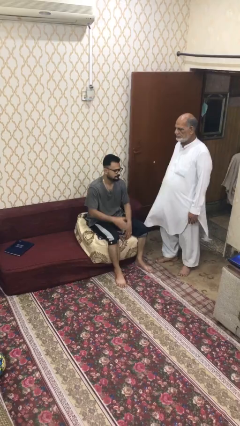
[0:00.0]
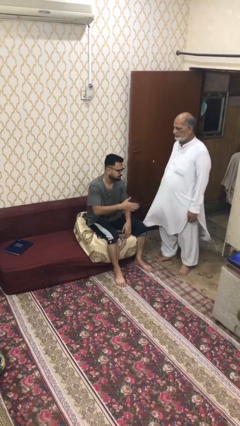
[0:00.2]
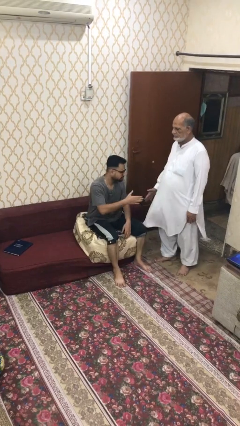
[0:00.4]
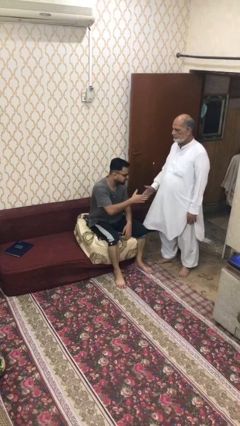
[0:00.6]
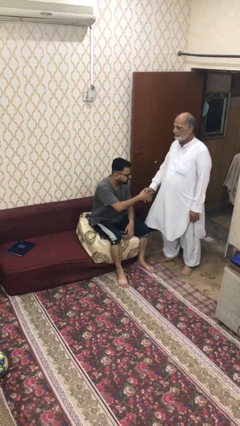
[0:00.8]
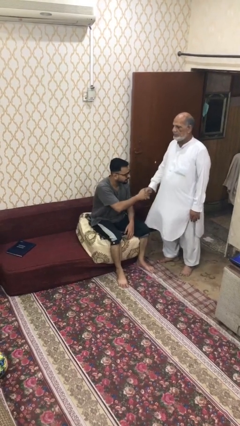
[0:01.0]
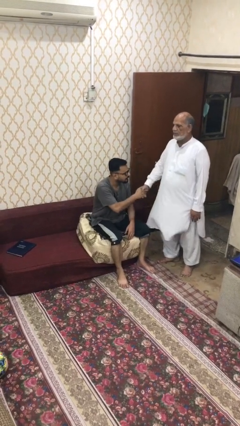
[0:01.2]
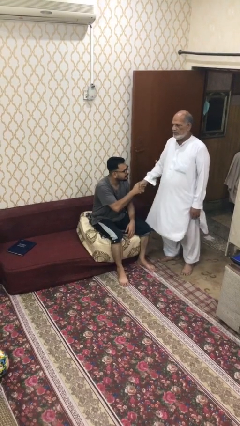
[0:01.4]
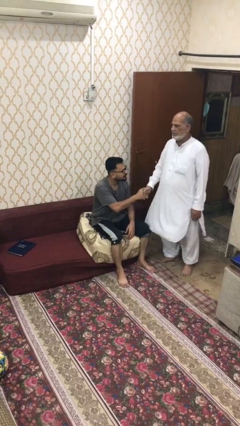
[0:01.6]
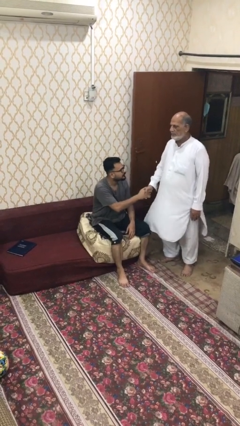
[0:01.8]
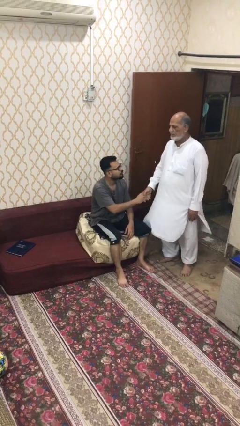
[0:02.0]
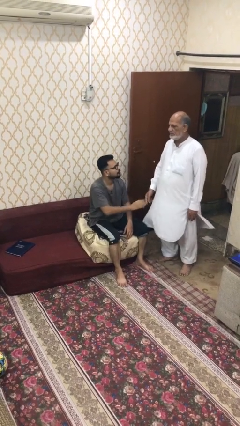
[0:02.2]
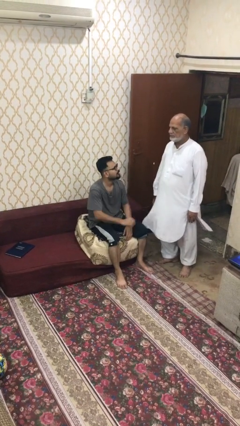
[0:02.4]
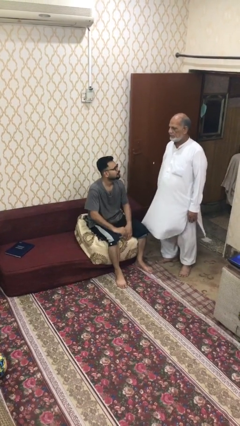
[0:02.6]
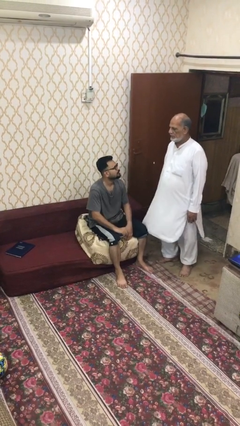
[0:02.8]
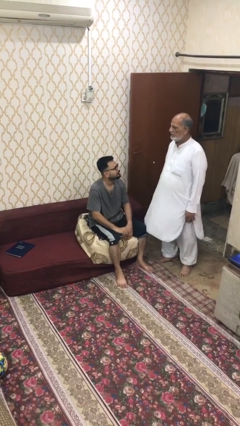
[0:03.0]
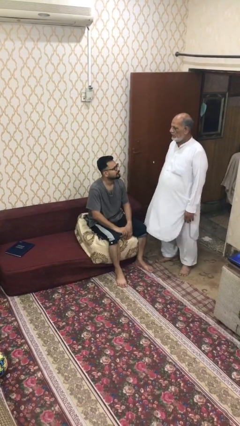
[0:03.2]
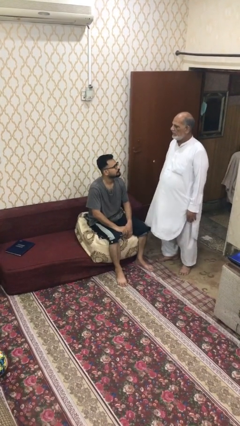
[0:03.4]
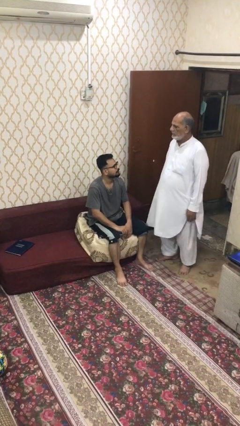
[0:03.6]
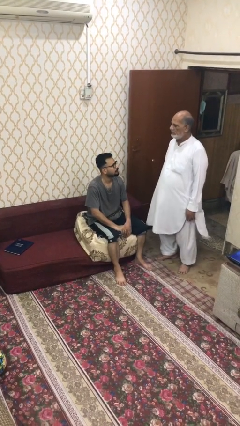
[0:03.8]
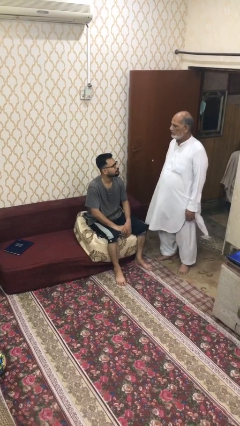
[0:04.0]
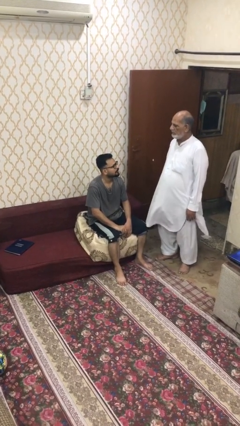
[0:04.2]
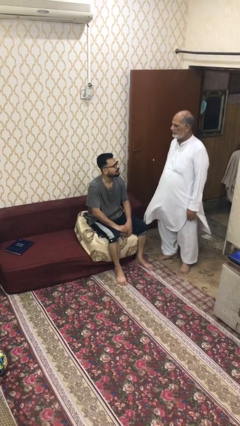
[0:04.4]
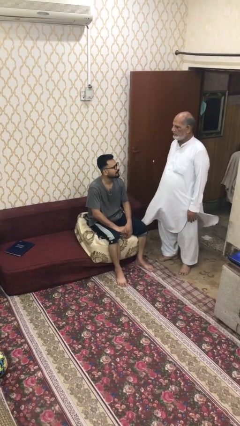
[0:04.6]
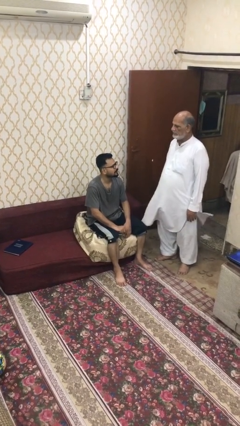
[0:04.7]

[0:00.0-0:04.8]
person shakes hand

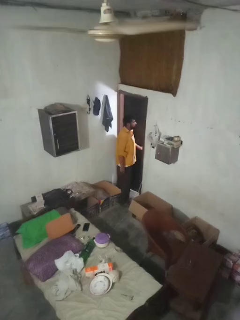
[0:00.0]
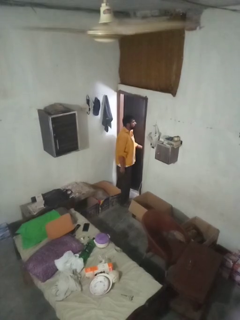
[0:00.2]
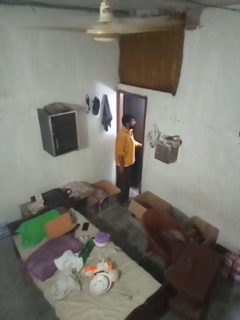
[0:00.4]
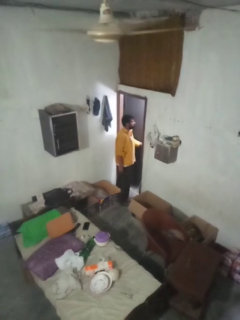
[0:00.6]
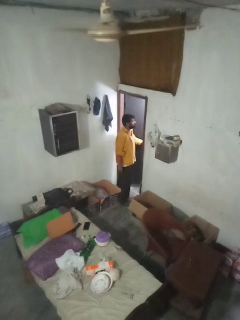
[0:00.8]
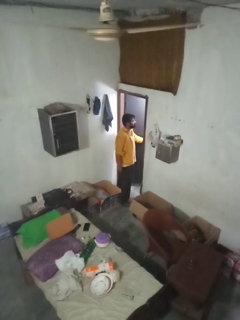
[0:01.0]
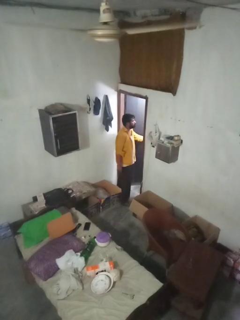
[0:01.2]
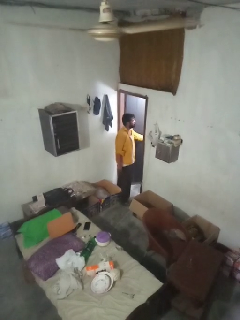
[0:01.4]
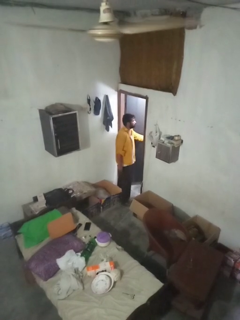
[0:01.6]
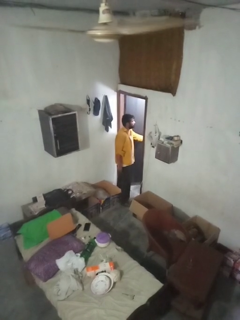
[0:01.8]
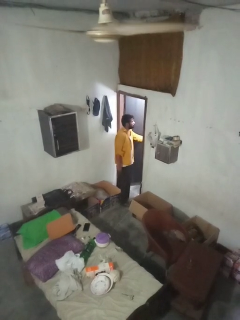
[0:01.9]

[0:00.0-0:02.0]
person opens facility door

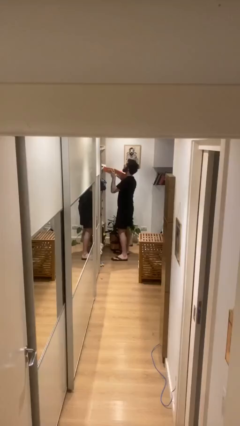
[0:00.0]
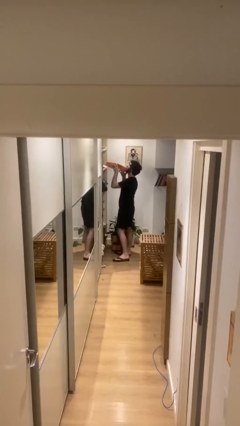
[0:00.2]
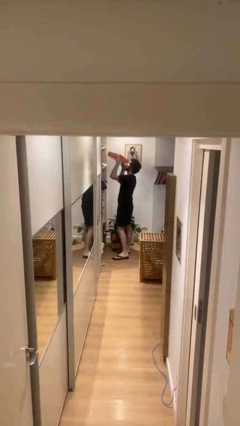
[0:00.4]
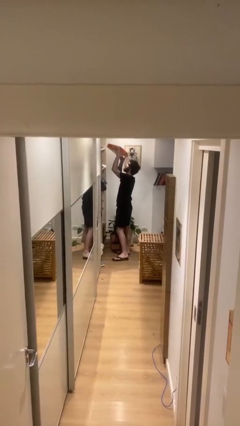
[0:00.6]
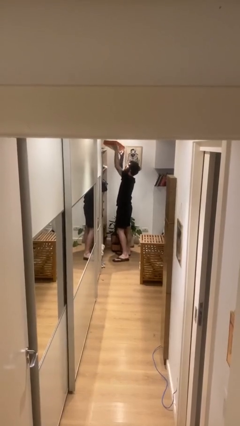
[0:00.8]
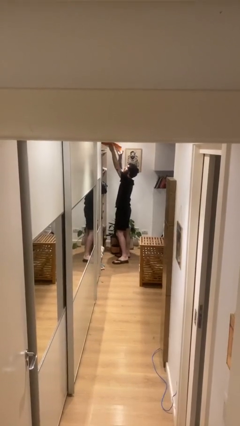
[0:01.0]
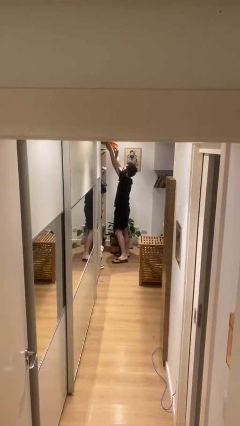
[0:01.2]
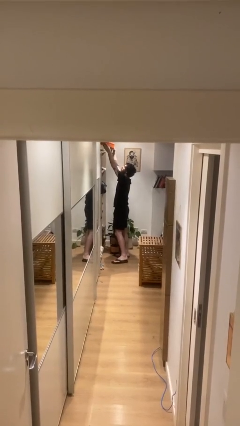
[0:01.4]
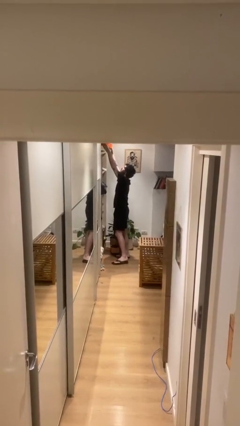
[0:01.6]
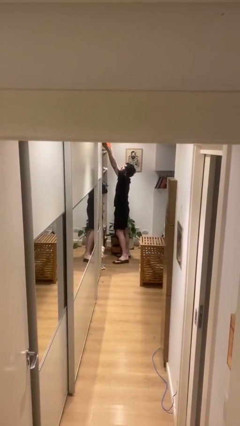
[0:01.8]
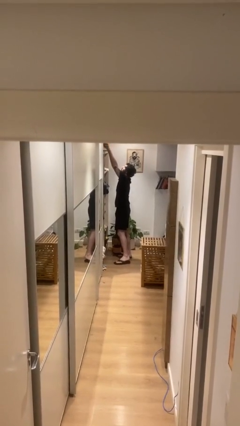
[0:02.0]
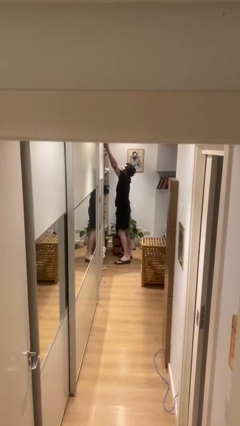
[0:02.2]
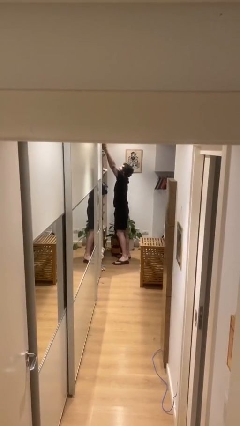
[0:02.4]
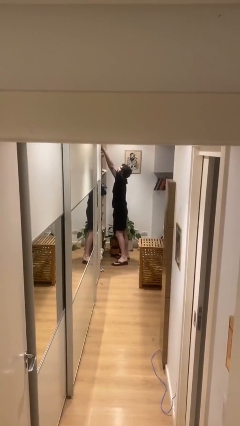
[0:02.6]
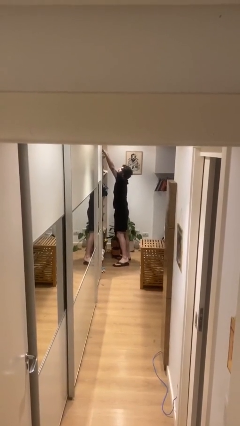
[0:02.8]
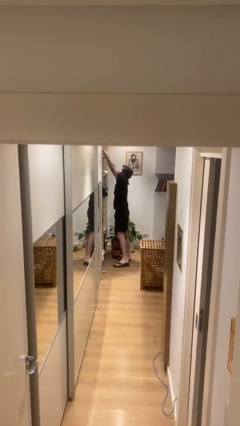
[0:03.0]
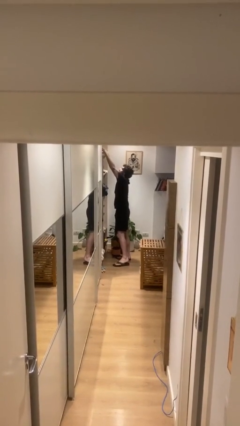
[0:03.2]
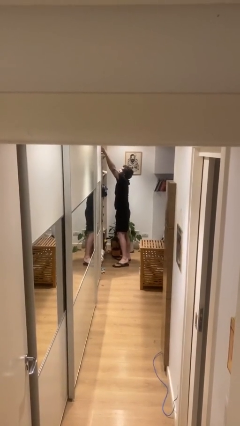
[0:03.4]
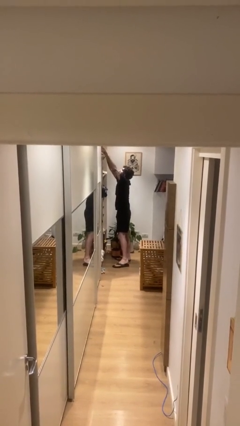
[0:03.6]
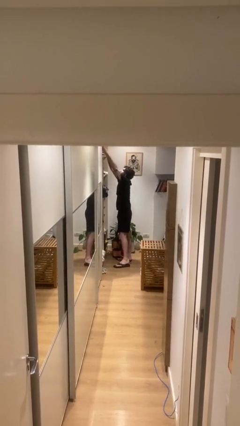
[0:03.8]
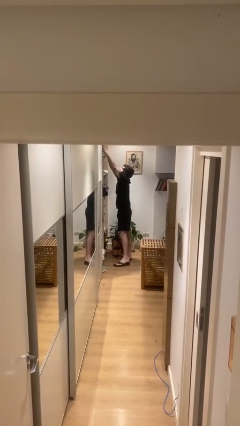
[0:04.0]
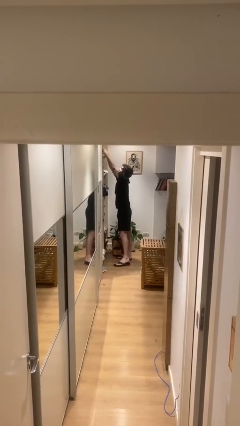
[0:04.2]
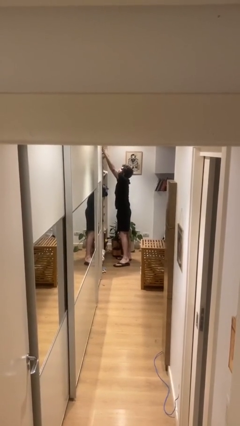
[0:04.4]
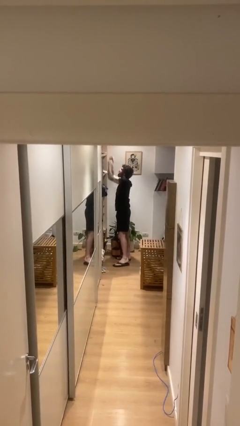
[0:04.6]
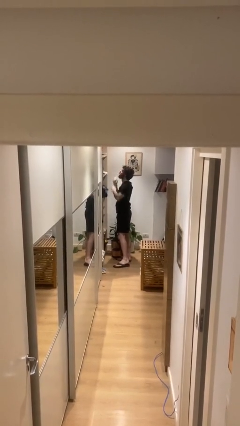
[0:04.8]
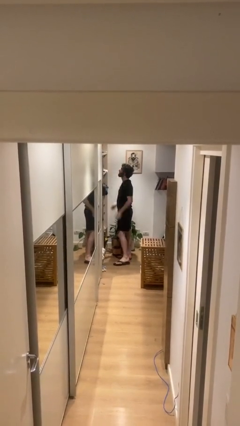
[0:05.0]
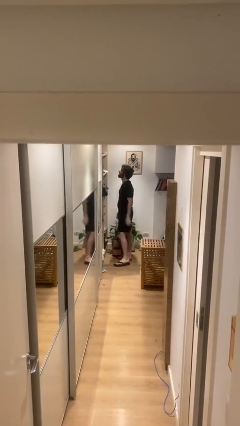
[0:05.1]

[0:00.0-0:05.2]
person puts down object on shelf

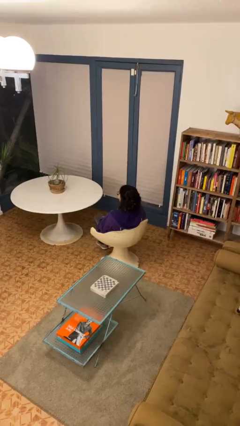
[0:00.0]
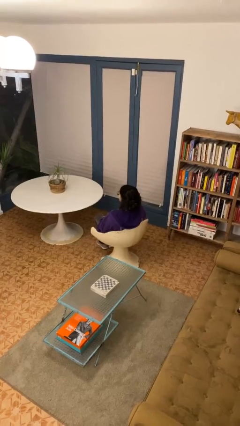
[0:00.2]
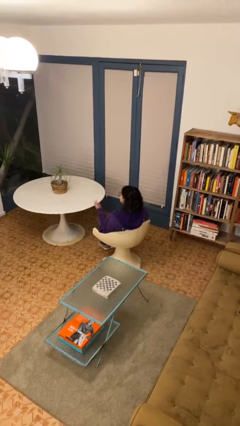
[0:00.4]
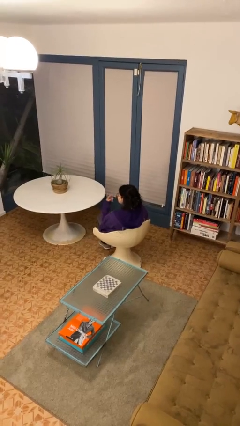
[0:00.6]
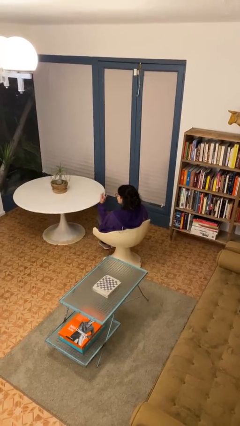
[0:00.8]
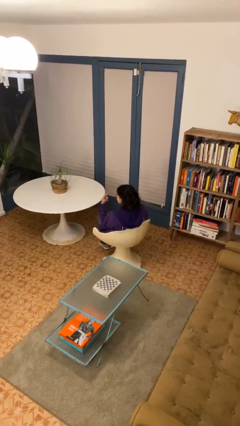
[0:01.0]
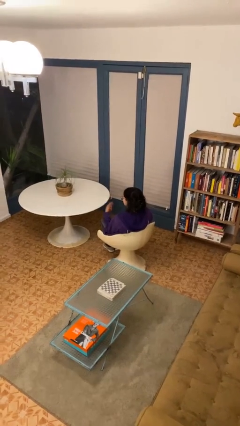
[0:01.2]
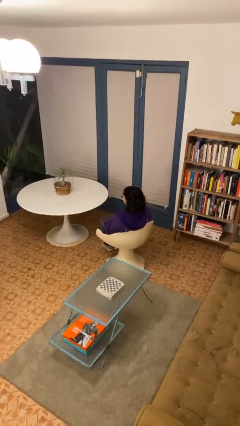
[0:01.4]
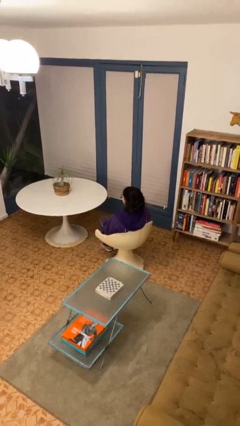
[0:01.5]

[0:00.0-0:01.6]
person gestures watch closely

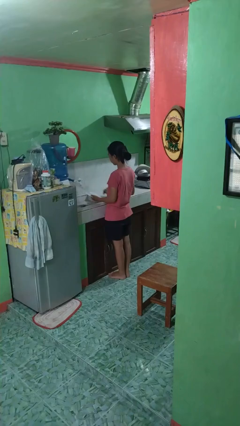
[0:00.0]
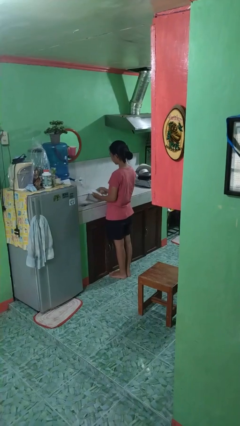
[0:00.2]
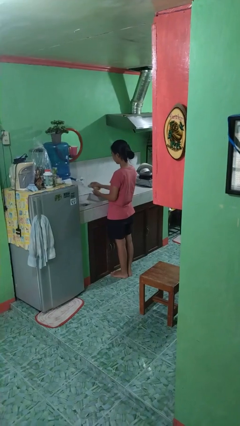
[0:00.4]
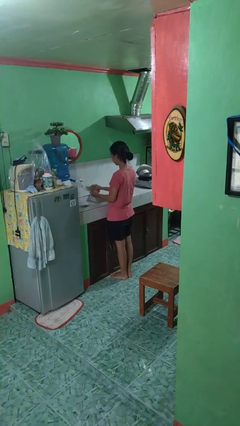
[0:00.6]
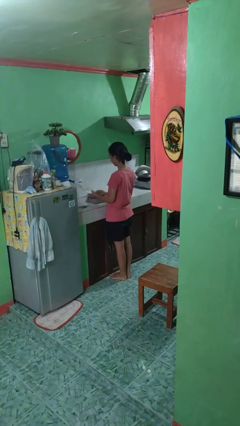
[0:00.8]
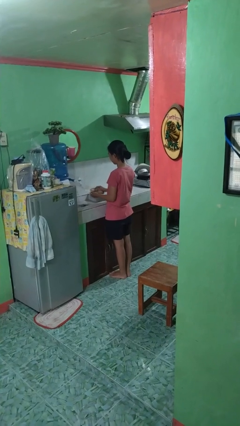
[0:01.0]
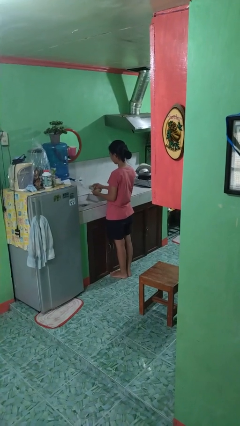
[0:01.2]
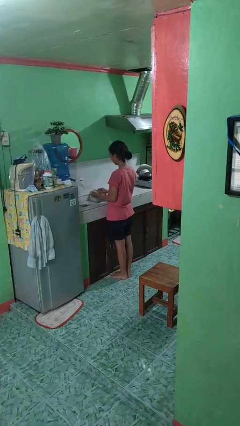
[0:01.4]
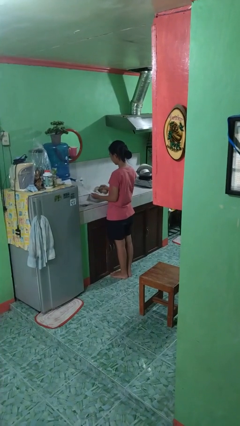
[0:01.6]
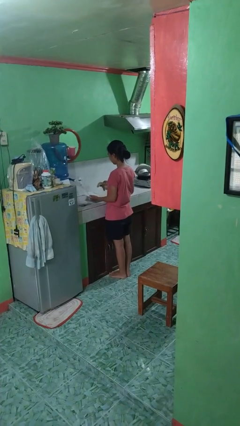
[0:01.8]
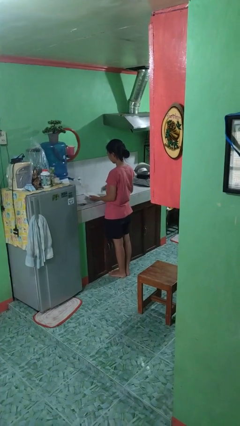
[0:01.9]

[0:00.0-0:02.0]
person dries dish

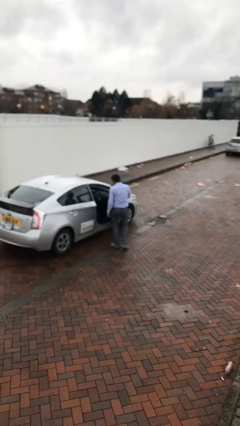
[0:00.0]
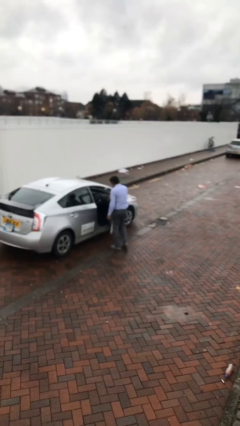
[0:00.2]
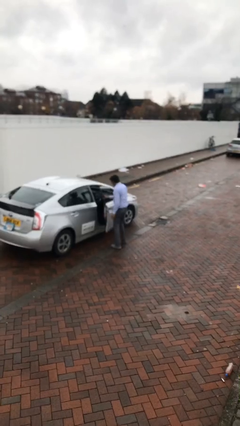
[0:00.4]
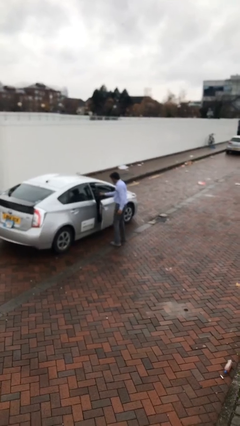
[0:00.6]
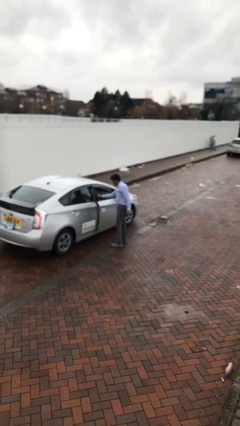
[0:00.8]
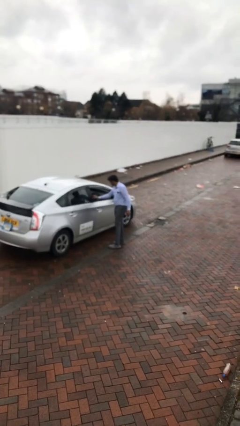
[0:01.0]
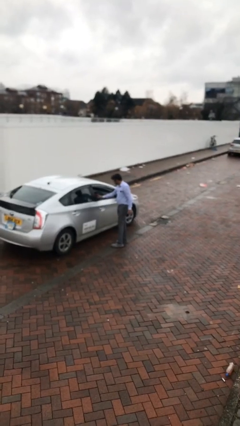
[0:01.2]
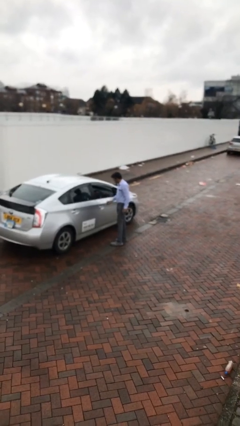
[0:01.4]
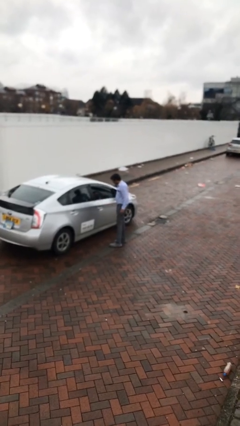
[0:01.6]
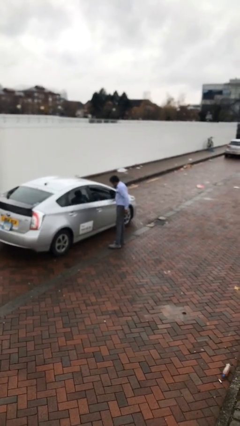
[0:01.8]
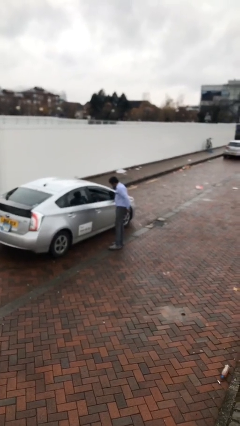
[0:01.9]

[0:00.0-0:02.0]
person closes car door

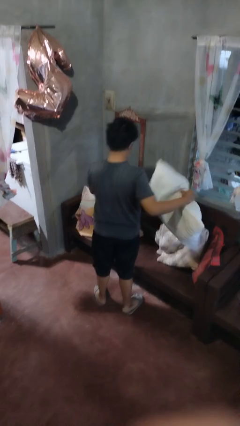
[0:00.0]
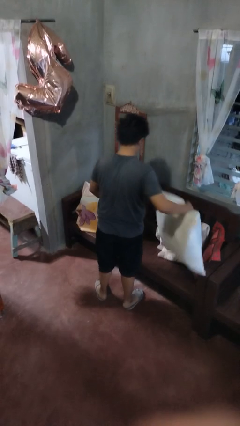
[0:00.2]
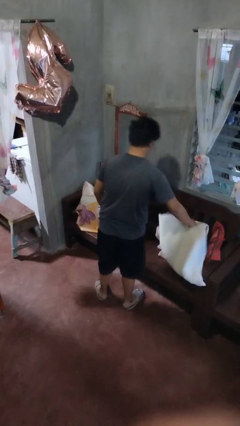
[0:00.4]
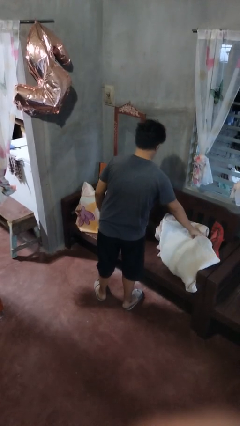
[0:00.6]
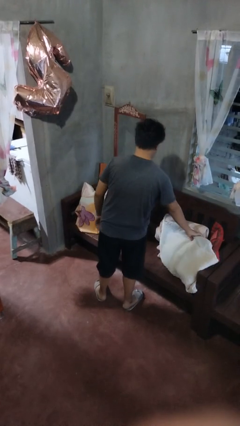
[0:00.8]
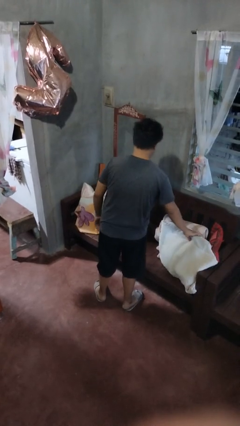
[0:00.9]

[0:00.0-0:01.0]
person puts down object on couch
